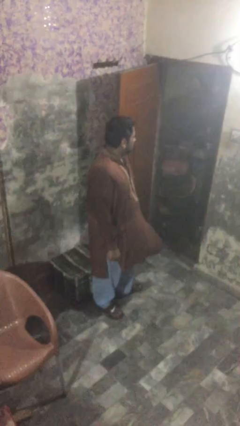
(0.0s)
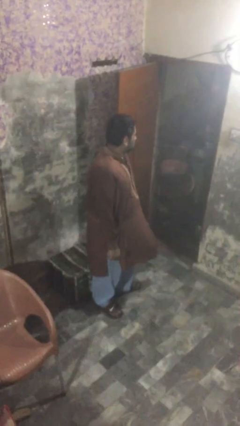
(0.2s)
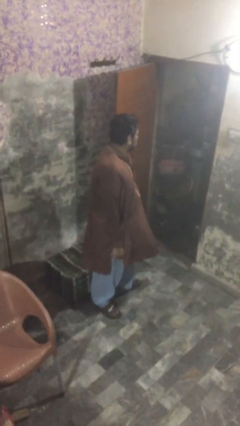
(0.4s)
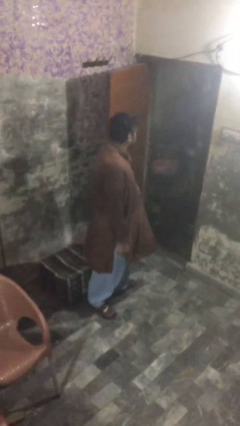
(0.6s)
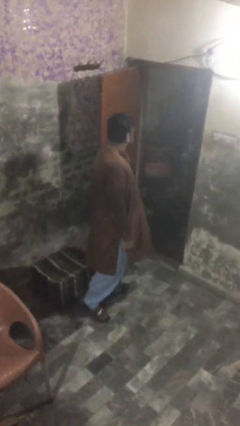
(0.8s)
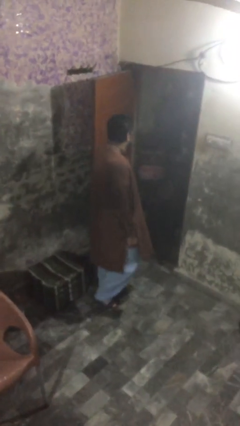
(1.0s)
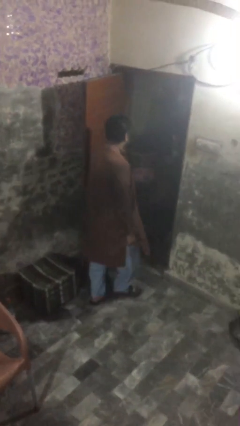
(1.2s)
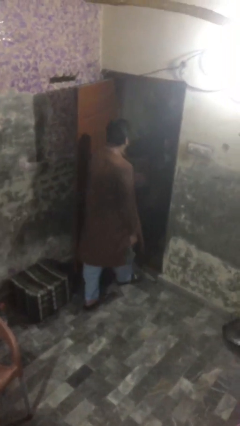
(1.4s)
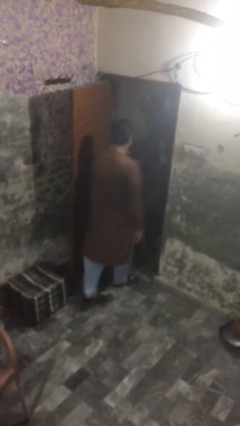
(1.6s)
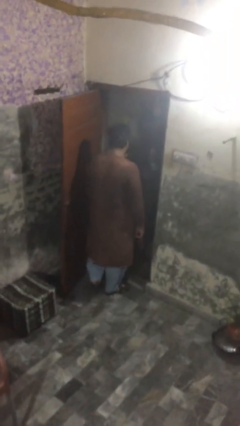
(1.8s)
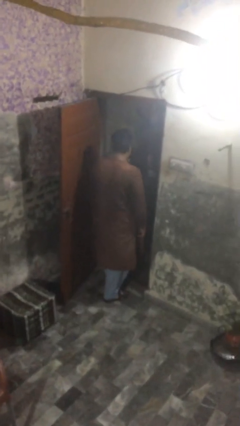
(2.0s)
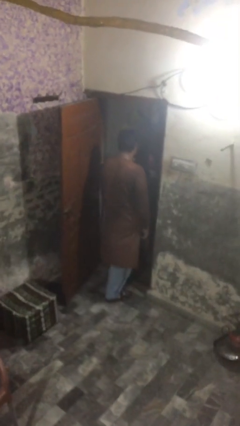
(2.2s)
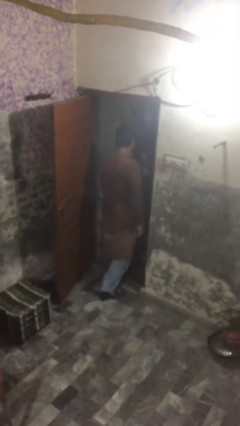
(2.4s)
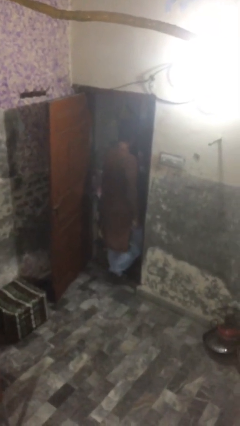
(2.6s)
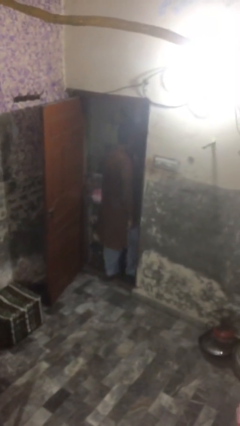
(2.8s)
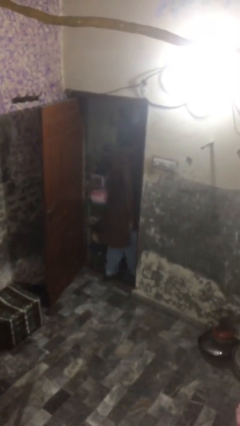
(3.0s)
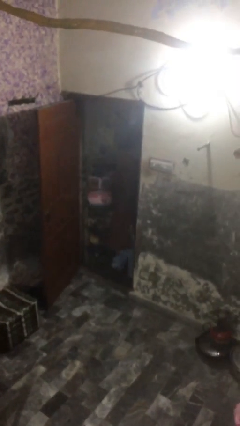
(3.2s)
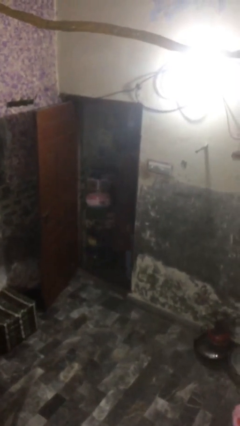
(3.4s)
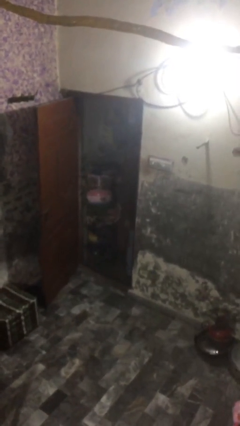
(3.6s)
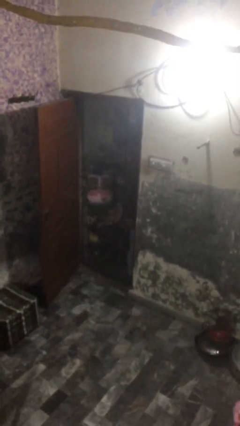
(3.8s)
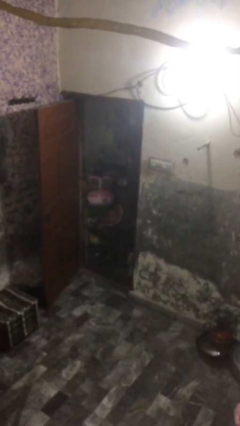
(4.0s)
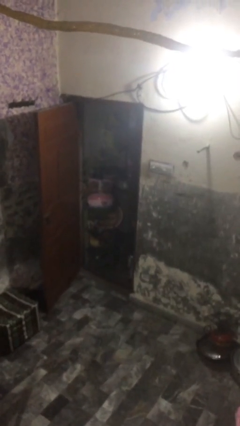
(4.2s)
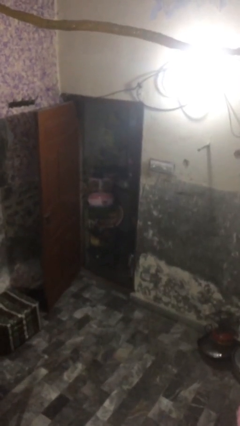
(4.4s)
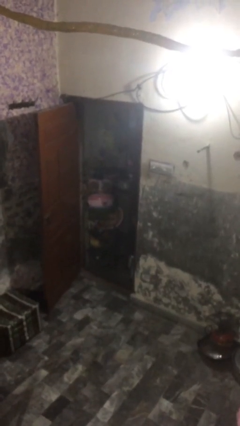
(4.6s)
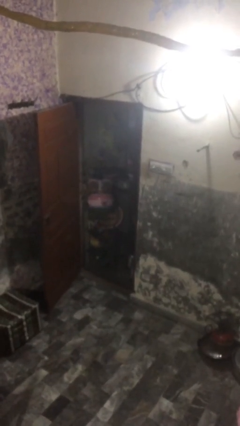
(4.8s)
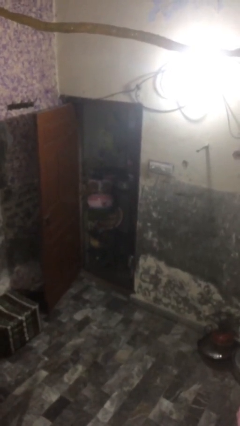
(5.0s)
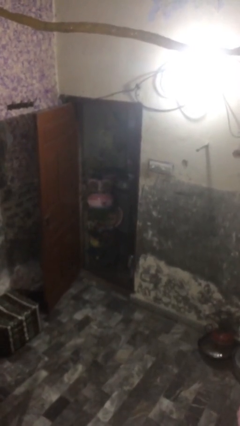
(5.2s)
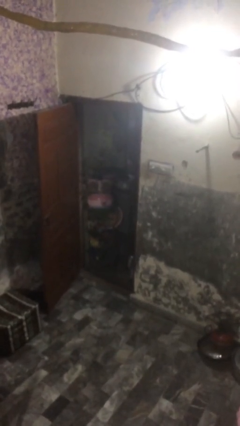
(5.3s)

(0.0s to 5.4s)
person exits scene through structure

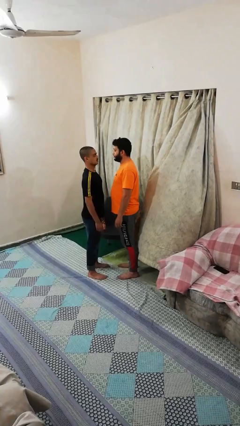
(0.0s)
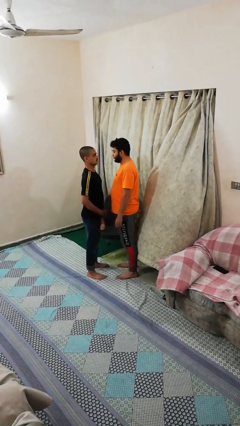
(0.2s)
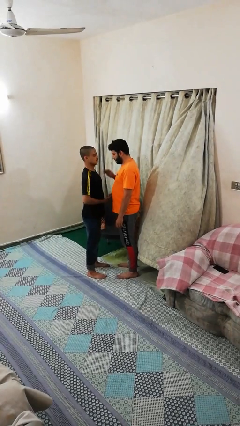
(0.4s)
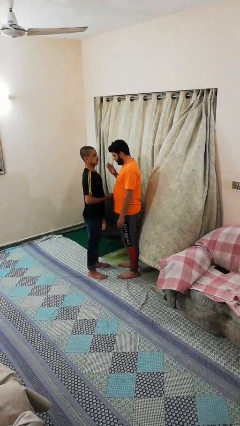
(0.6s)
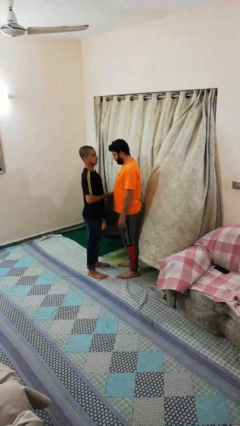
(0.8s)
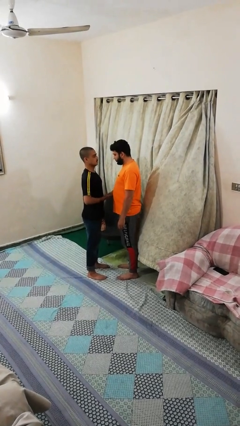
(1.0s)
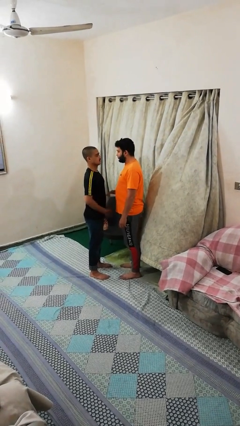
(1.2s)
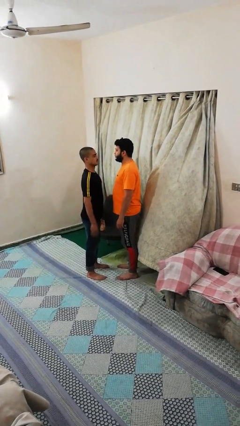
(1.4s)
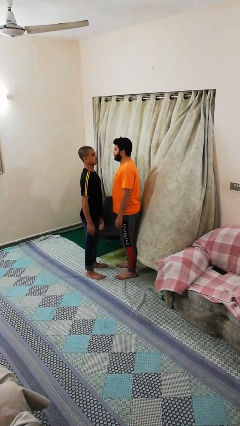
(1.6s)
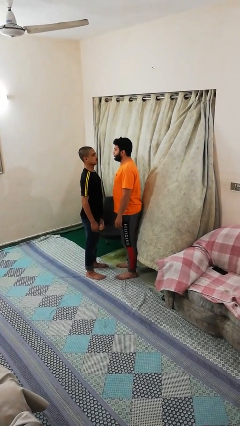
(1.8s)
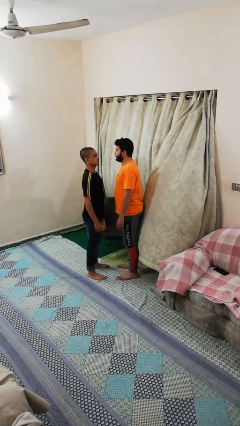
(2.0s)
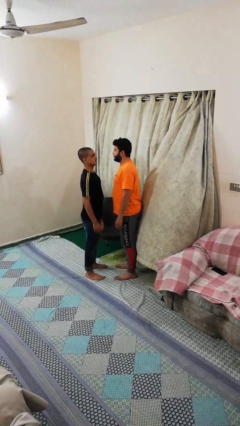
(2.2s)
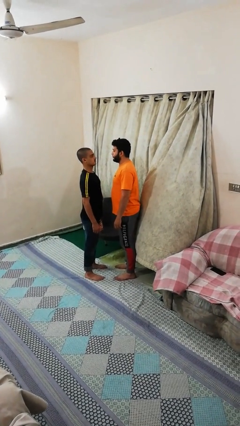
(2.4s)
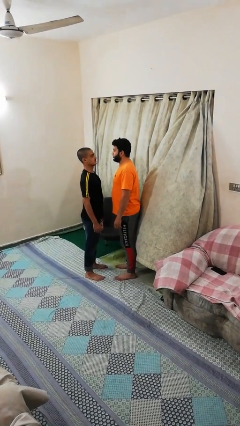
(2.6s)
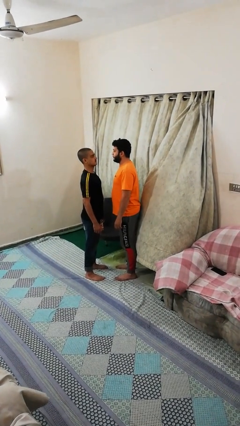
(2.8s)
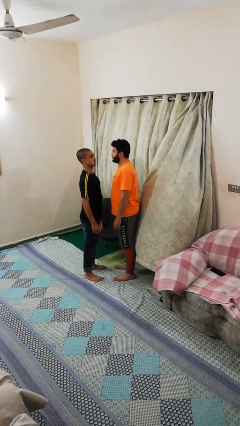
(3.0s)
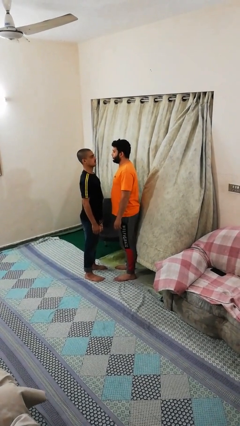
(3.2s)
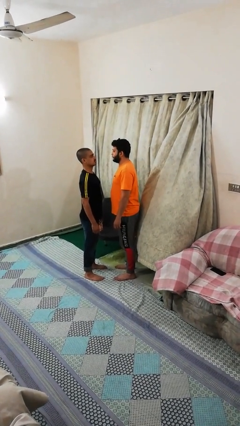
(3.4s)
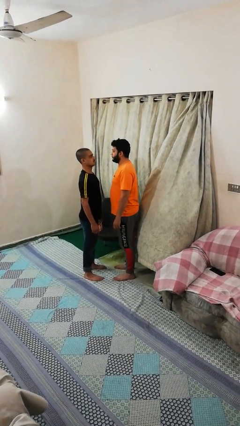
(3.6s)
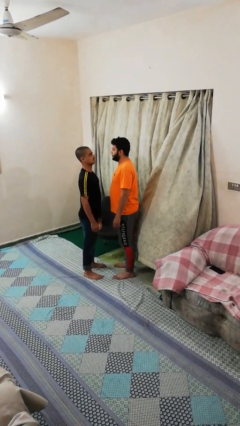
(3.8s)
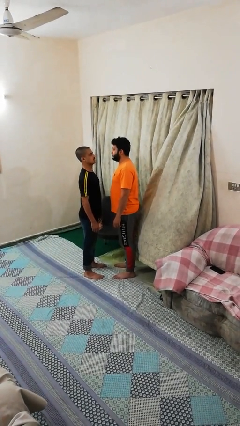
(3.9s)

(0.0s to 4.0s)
person highfives hand

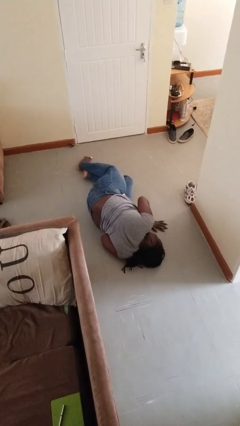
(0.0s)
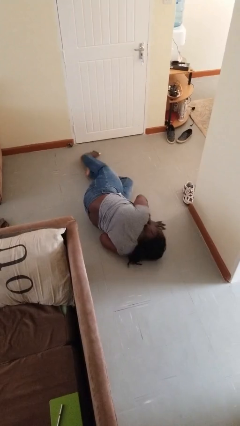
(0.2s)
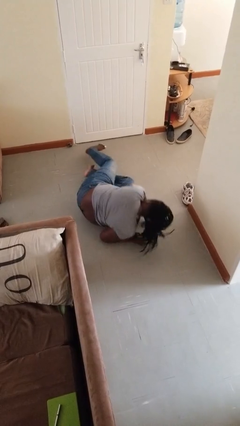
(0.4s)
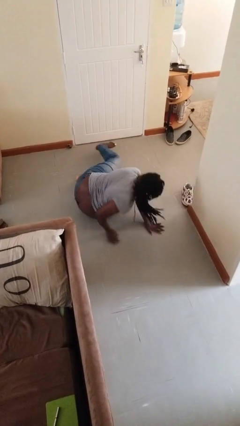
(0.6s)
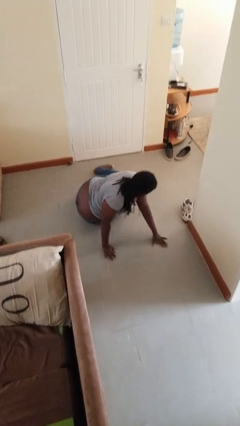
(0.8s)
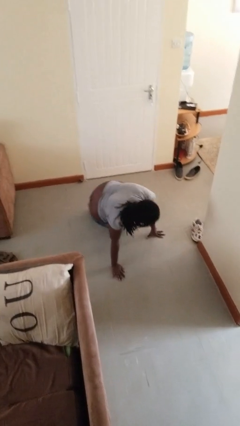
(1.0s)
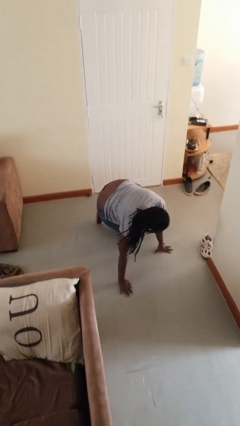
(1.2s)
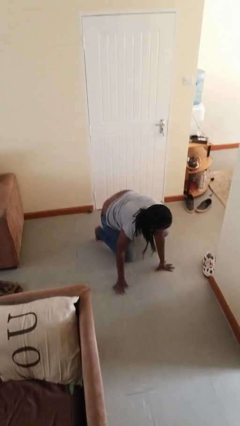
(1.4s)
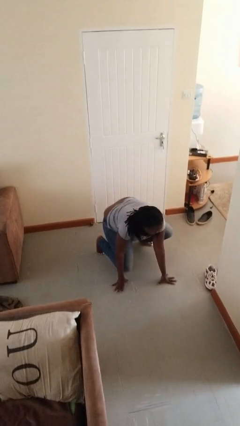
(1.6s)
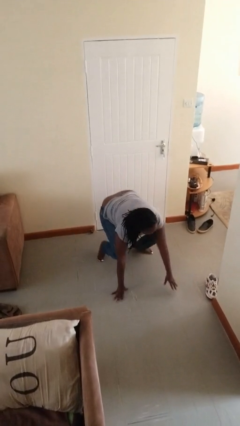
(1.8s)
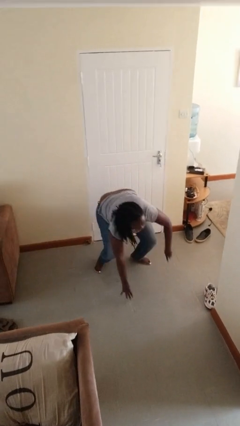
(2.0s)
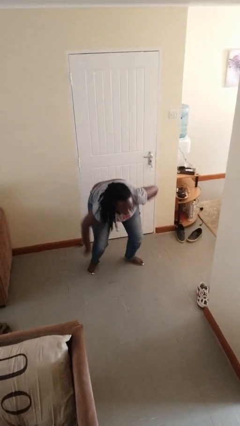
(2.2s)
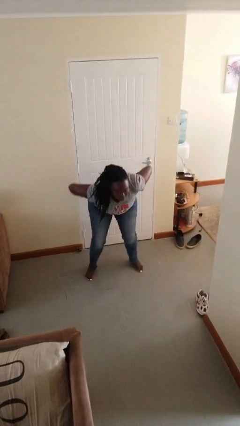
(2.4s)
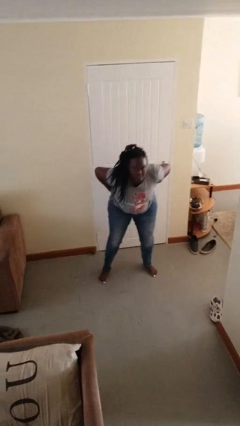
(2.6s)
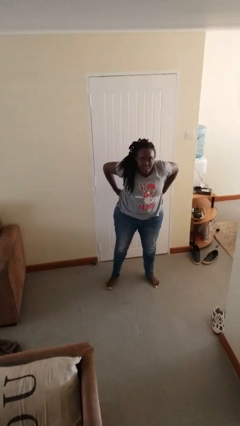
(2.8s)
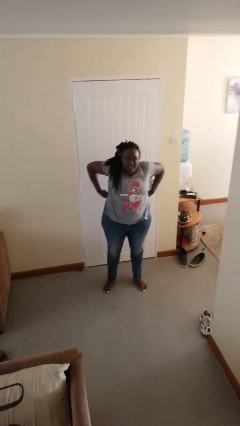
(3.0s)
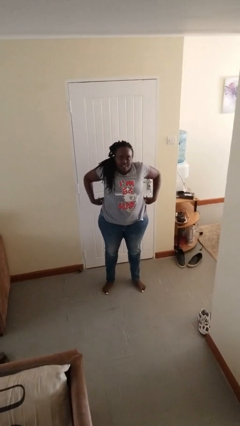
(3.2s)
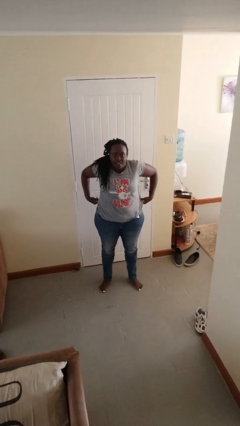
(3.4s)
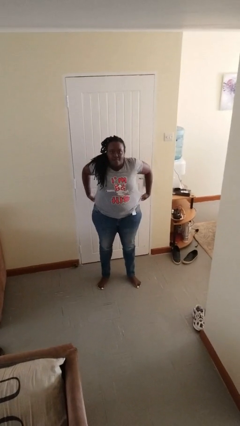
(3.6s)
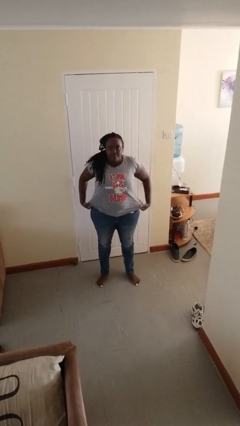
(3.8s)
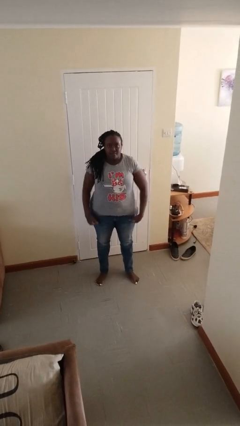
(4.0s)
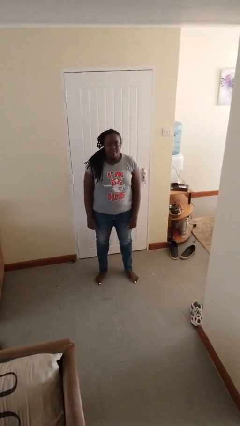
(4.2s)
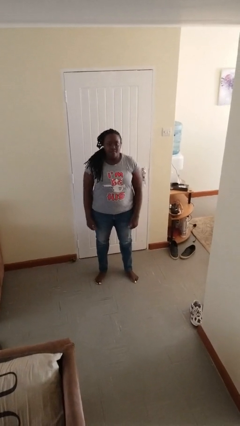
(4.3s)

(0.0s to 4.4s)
person stands up from floor

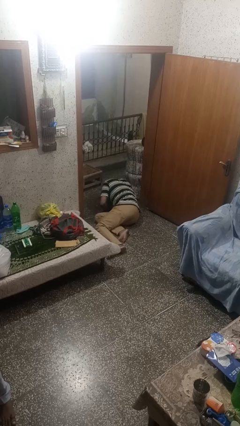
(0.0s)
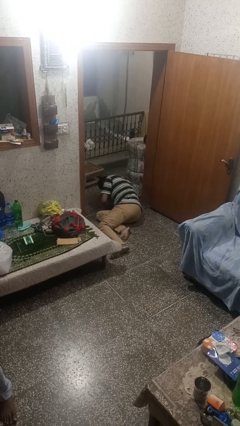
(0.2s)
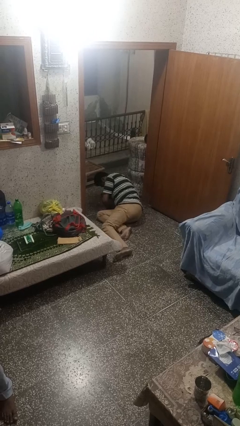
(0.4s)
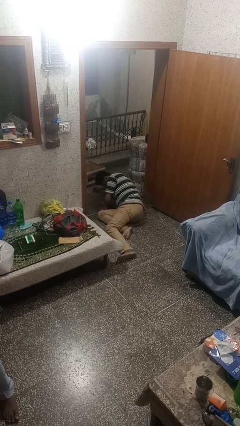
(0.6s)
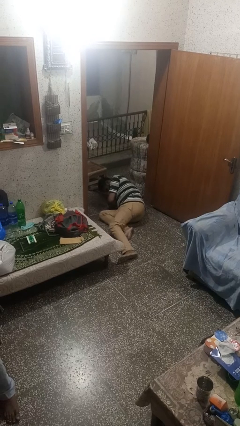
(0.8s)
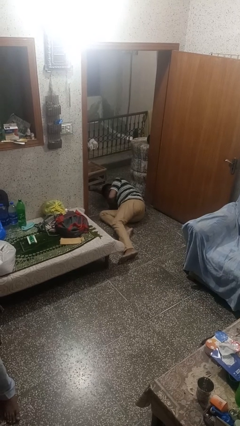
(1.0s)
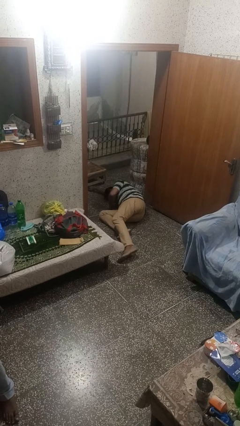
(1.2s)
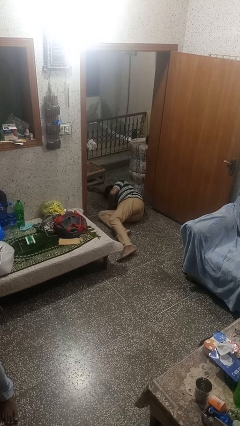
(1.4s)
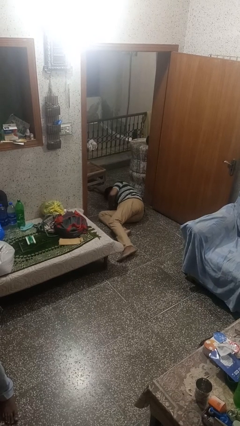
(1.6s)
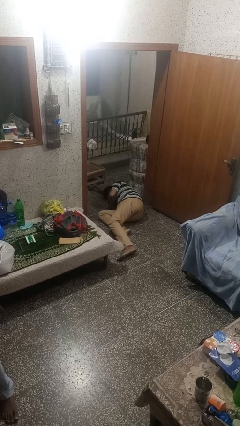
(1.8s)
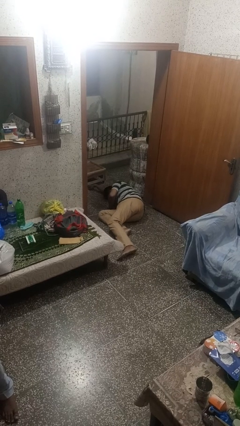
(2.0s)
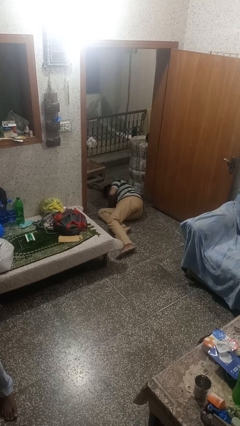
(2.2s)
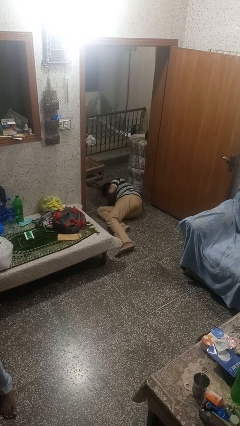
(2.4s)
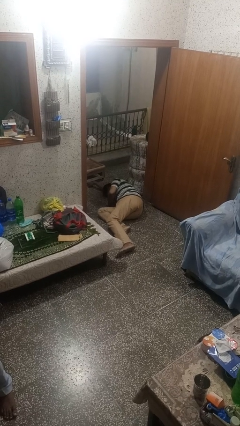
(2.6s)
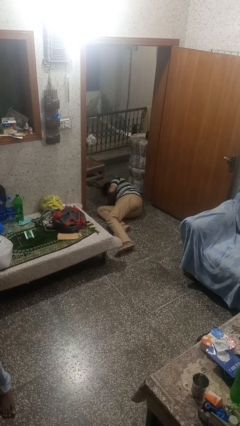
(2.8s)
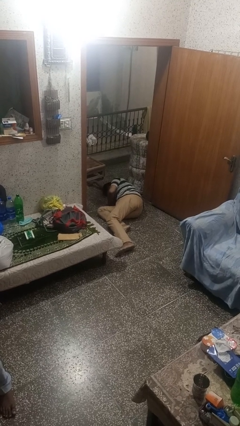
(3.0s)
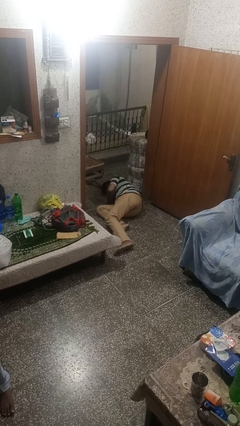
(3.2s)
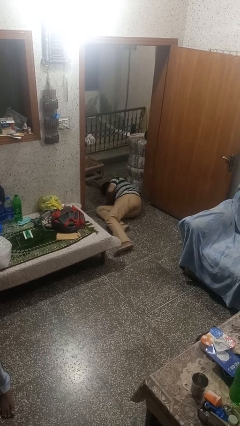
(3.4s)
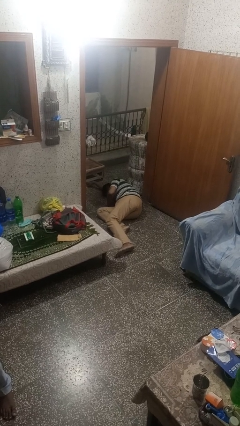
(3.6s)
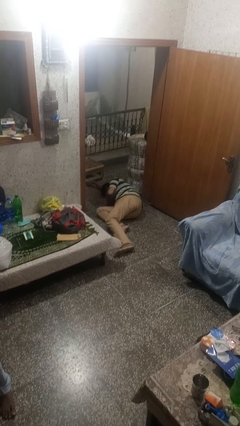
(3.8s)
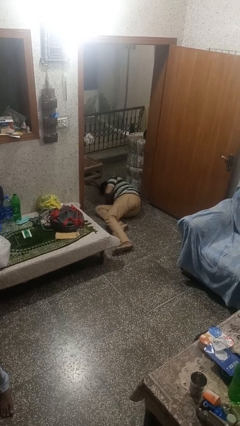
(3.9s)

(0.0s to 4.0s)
person lies down on floor

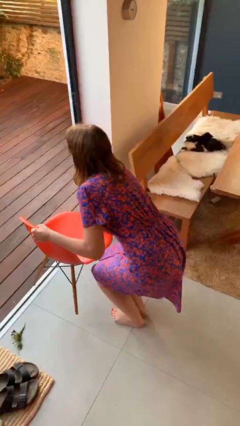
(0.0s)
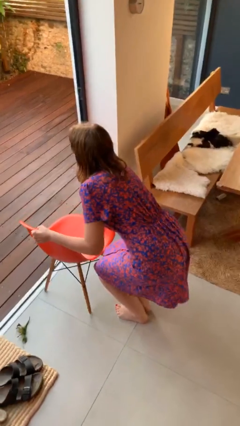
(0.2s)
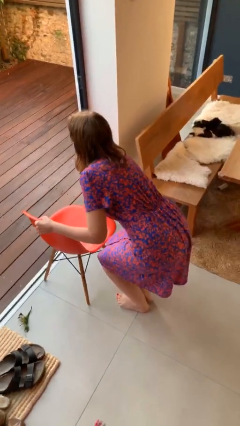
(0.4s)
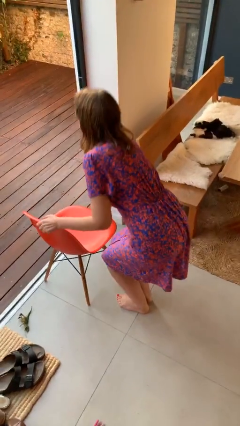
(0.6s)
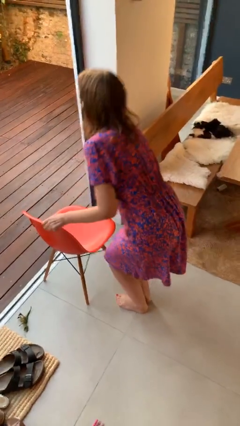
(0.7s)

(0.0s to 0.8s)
person puts down object on floor
